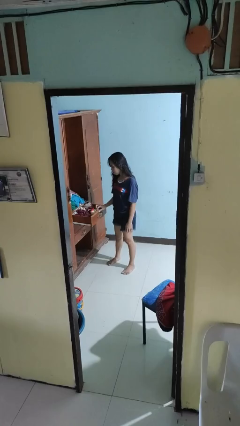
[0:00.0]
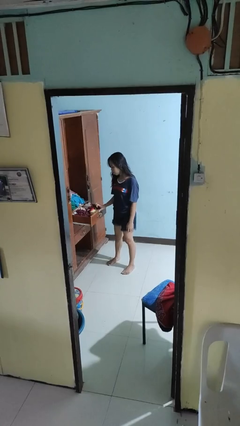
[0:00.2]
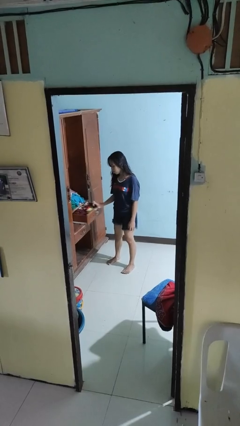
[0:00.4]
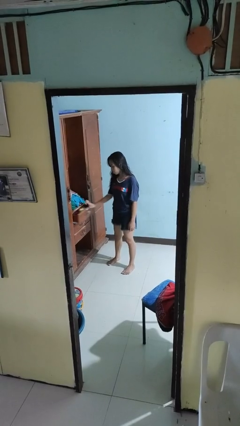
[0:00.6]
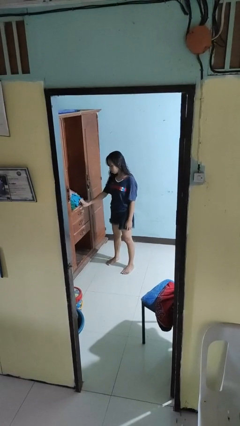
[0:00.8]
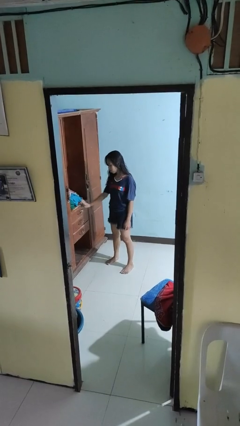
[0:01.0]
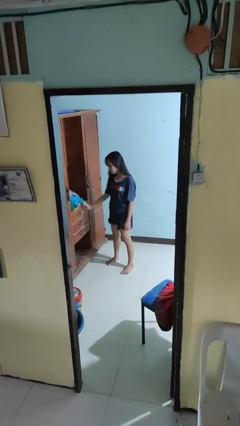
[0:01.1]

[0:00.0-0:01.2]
person closes dresser drawer

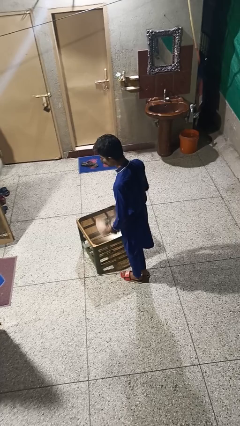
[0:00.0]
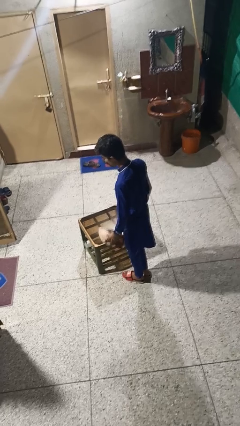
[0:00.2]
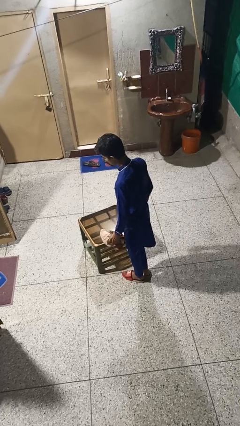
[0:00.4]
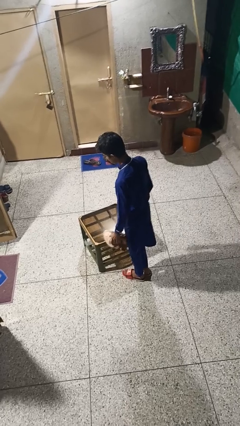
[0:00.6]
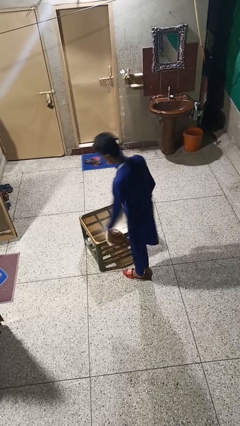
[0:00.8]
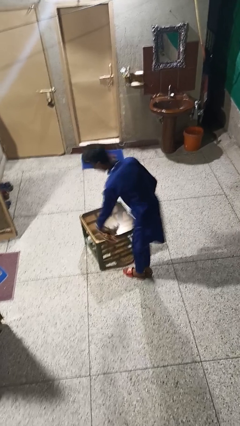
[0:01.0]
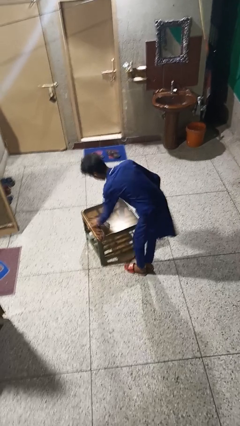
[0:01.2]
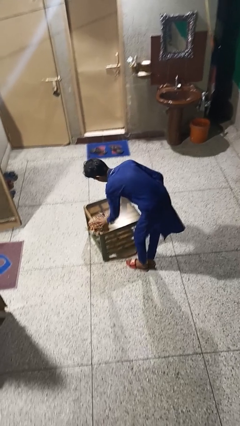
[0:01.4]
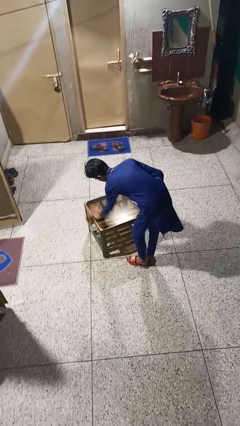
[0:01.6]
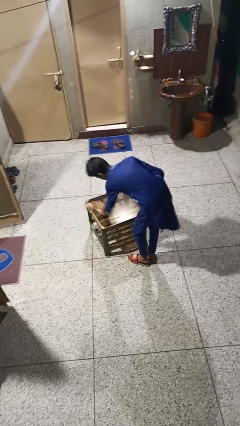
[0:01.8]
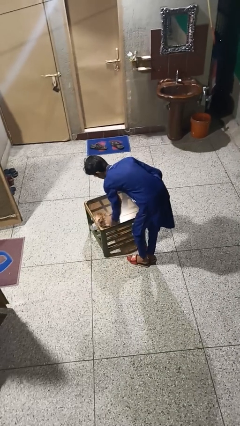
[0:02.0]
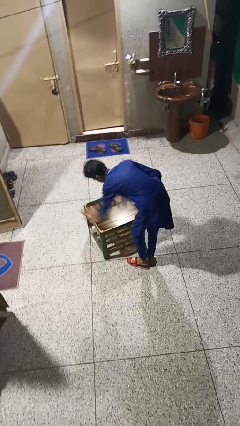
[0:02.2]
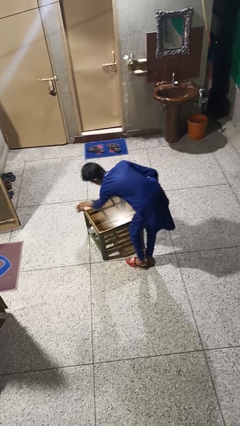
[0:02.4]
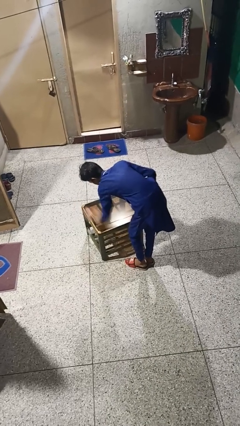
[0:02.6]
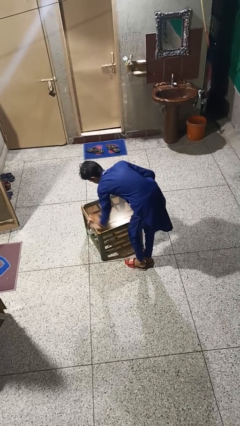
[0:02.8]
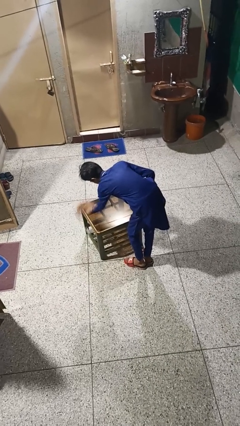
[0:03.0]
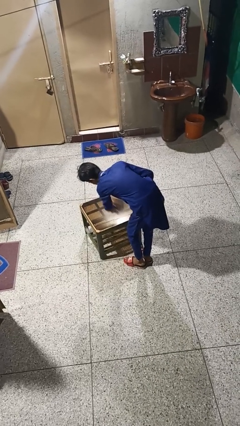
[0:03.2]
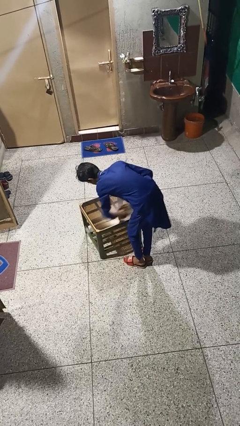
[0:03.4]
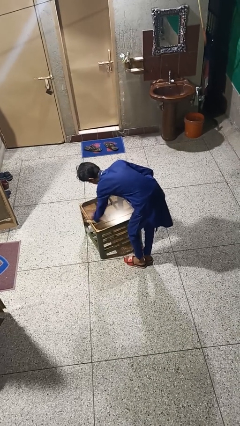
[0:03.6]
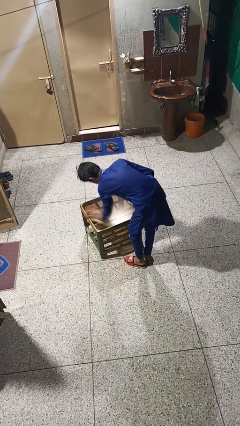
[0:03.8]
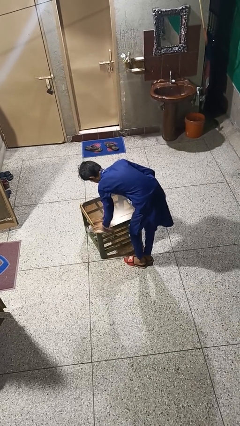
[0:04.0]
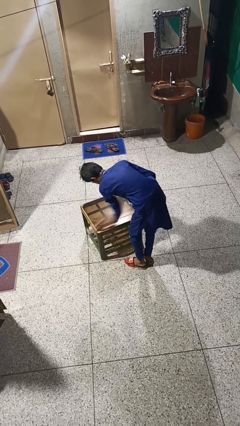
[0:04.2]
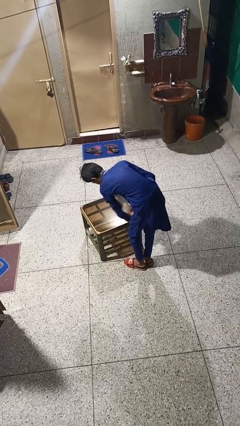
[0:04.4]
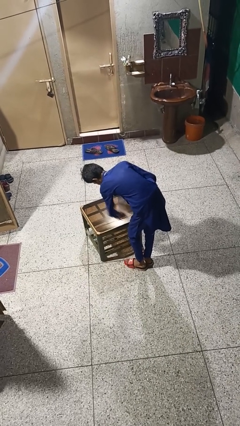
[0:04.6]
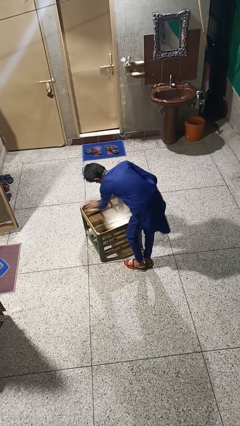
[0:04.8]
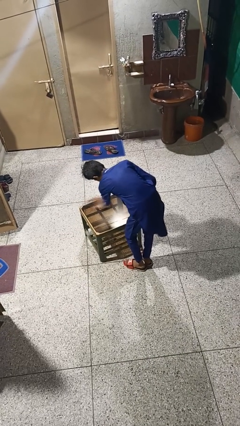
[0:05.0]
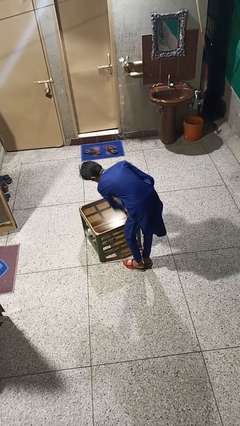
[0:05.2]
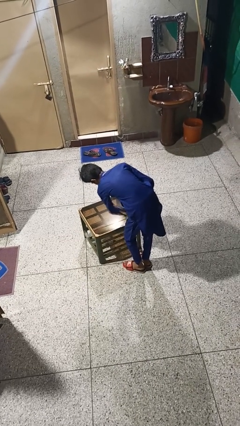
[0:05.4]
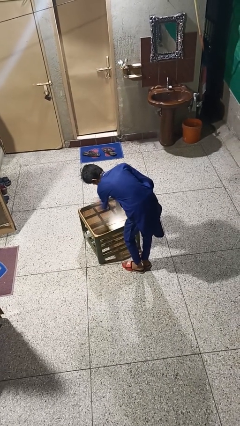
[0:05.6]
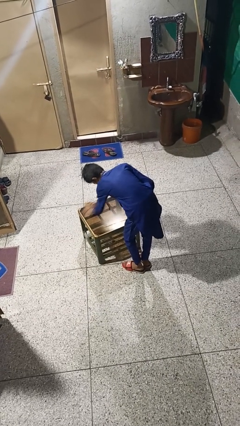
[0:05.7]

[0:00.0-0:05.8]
person cleans table with rag

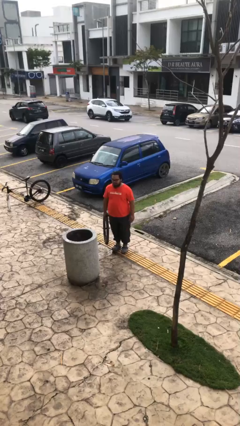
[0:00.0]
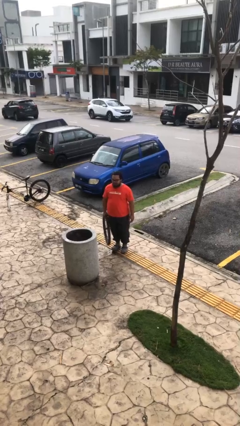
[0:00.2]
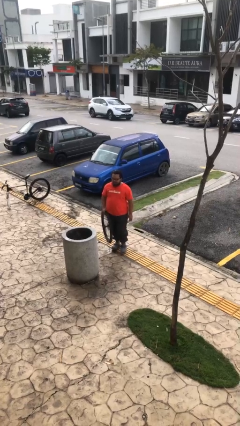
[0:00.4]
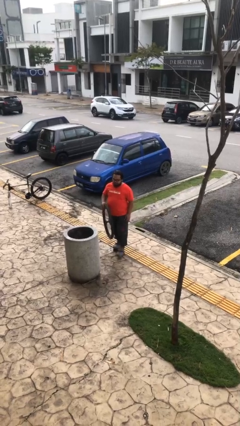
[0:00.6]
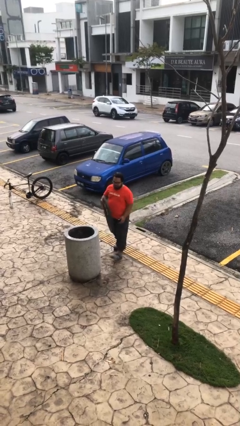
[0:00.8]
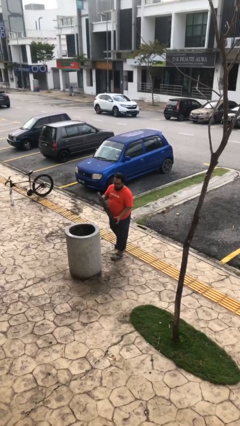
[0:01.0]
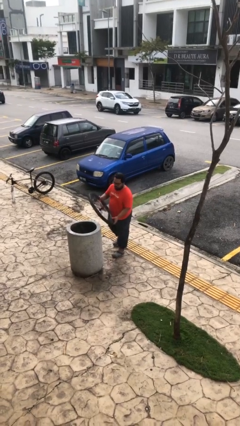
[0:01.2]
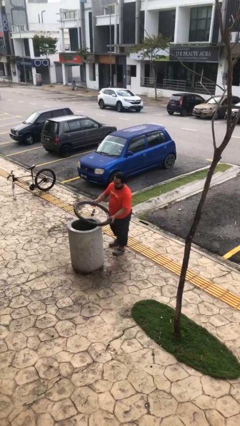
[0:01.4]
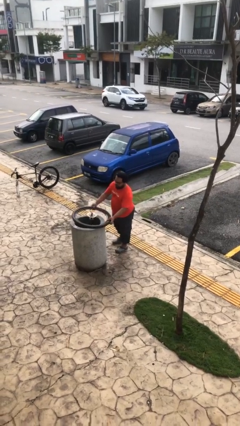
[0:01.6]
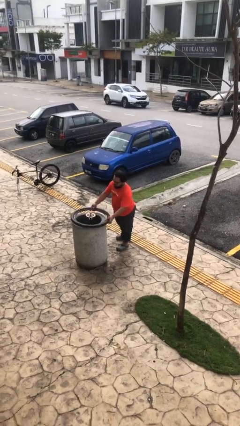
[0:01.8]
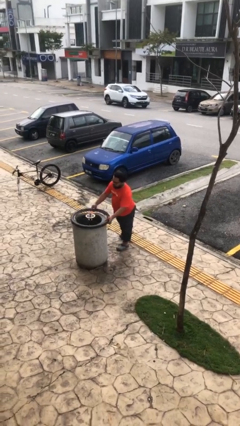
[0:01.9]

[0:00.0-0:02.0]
person puts down object on table

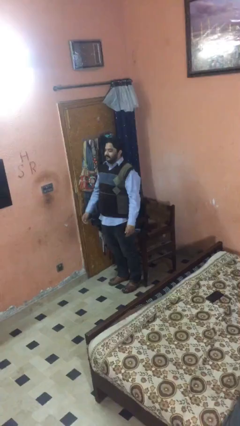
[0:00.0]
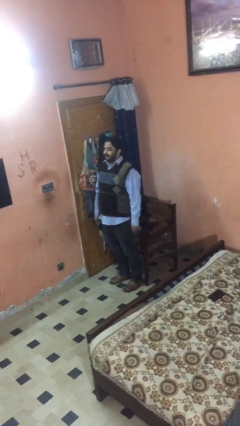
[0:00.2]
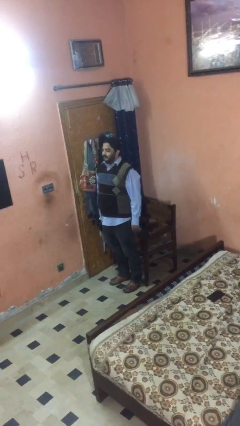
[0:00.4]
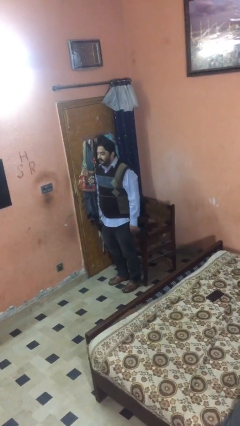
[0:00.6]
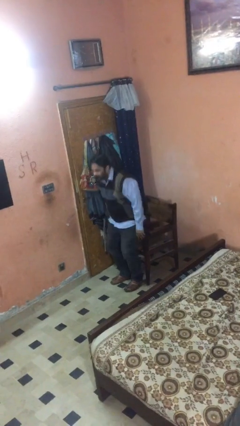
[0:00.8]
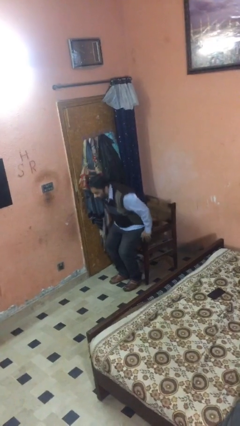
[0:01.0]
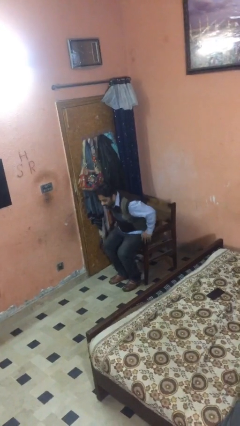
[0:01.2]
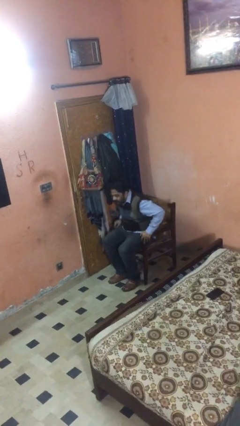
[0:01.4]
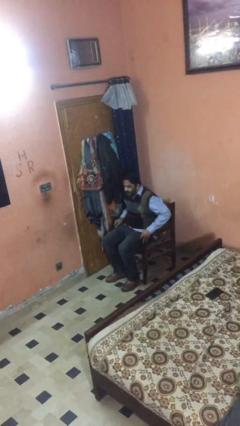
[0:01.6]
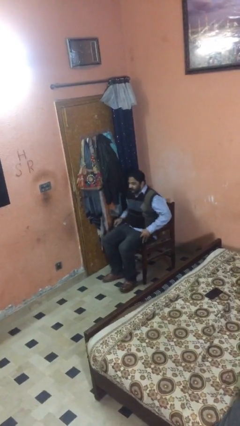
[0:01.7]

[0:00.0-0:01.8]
person sits down

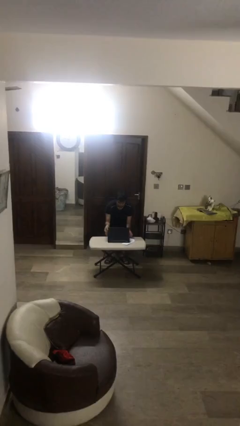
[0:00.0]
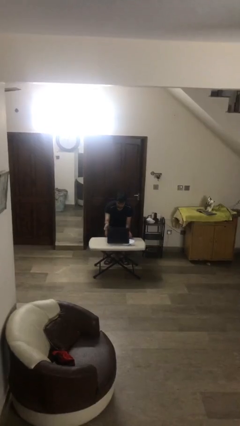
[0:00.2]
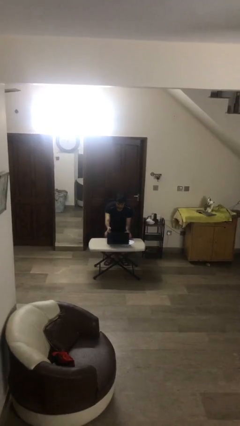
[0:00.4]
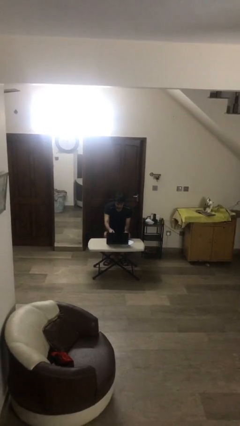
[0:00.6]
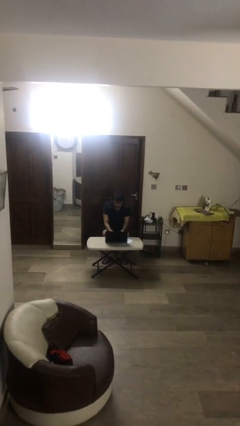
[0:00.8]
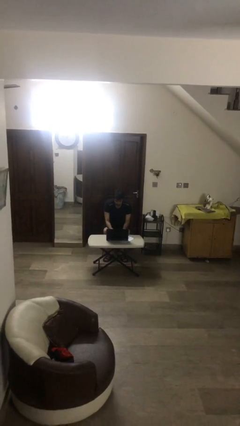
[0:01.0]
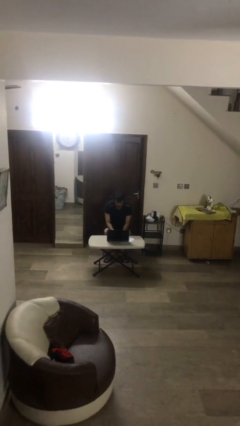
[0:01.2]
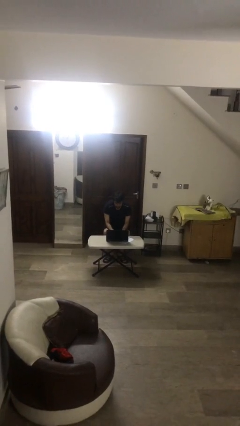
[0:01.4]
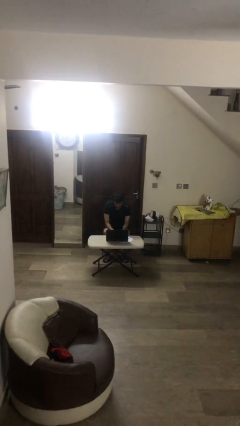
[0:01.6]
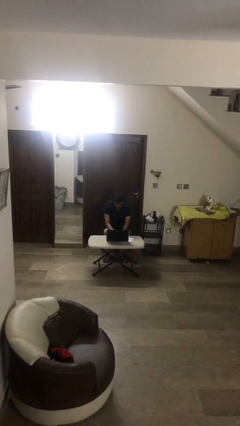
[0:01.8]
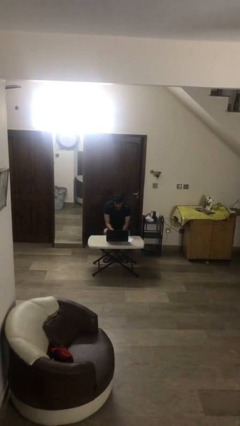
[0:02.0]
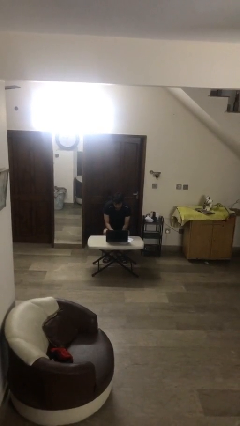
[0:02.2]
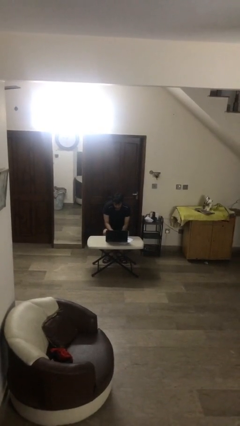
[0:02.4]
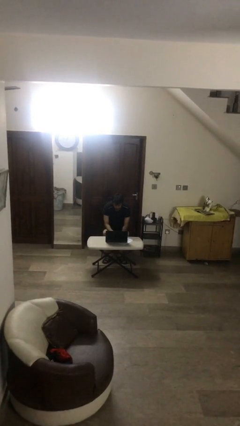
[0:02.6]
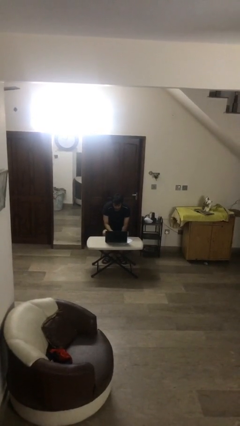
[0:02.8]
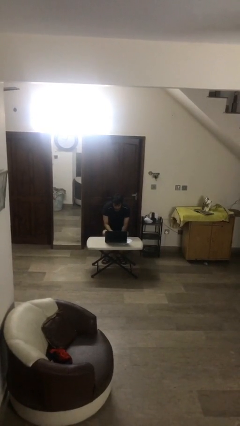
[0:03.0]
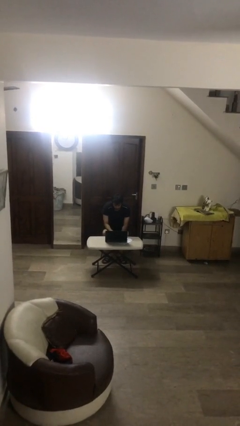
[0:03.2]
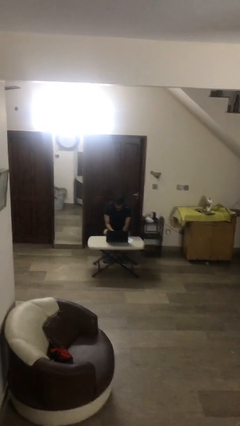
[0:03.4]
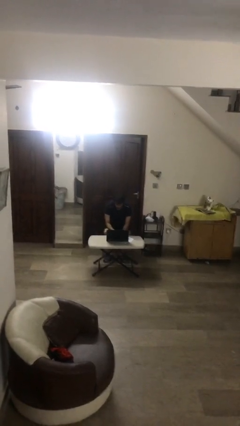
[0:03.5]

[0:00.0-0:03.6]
person interacts with laptop

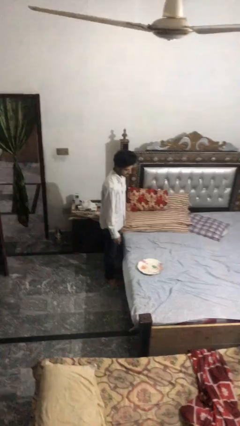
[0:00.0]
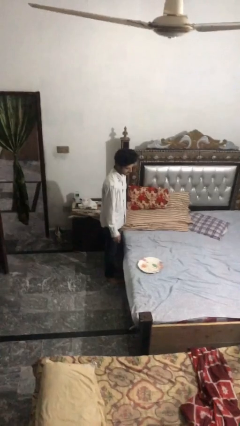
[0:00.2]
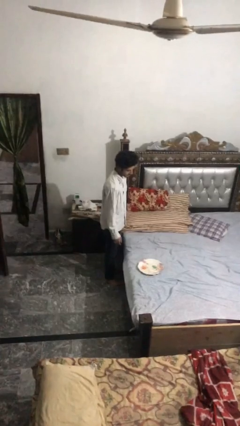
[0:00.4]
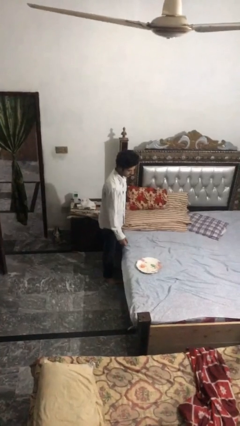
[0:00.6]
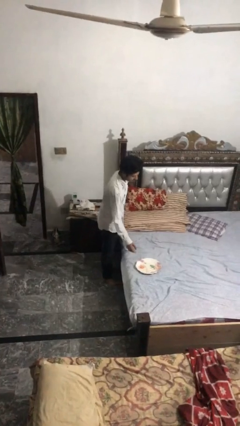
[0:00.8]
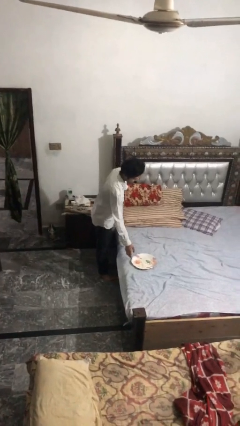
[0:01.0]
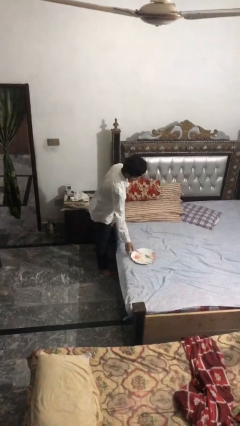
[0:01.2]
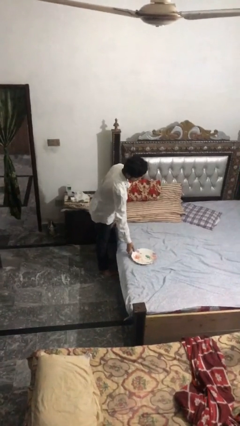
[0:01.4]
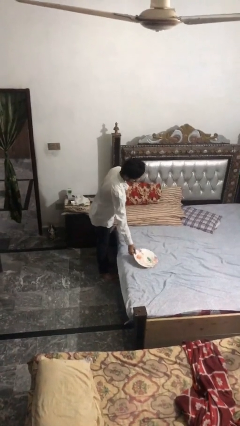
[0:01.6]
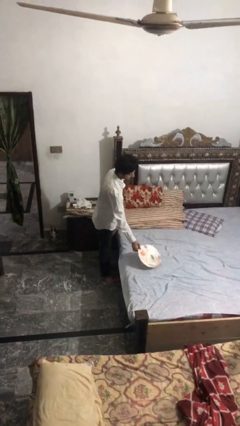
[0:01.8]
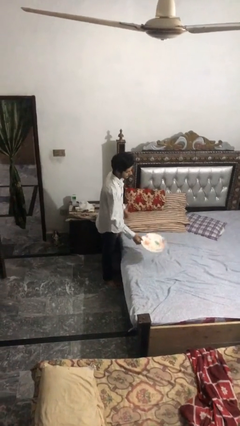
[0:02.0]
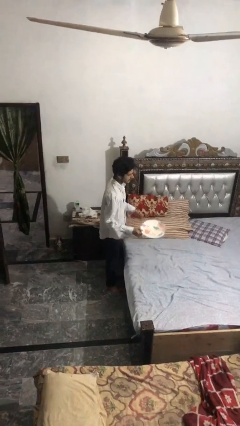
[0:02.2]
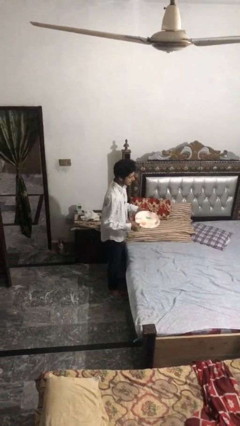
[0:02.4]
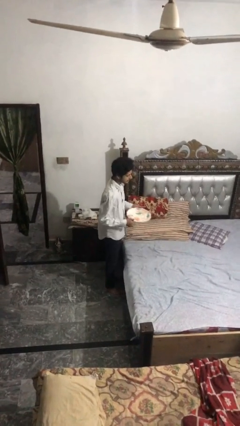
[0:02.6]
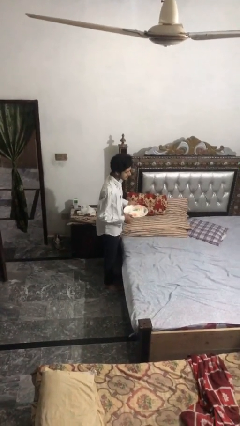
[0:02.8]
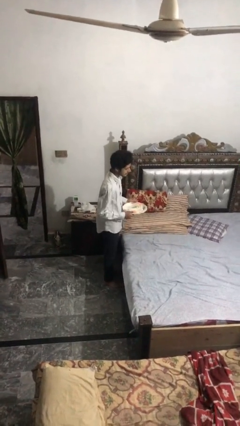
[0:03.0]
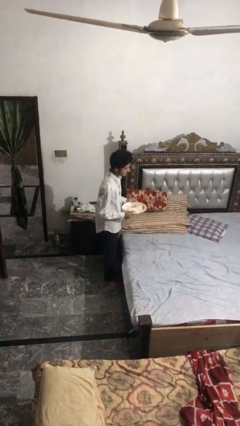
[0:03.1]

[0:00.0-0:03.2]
person picks up object from bed
